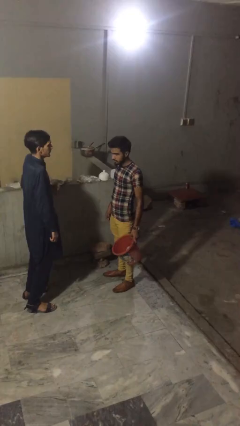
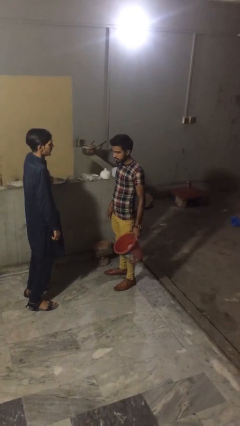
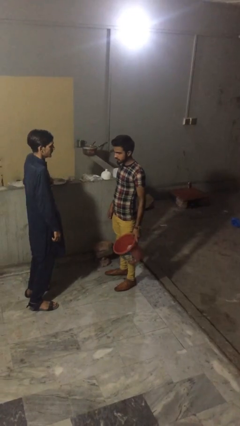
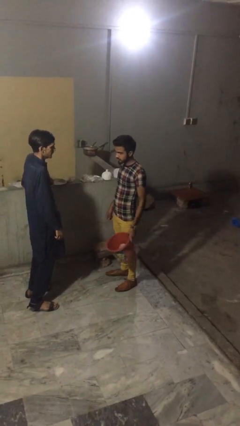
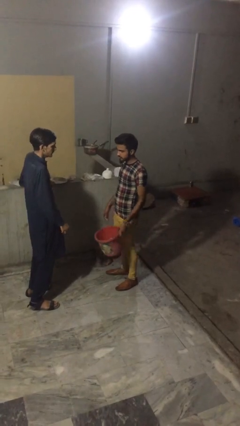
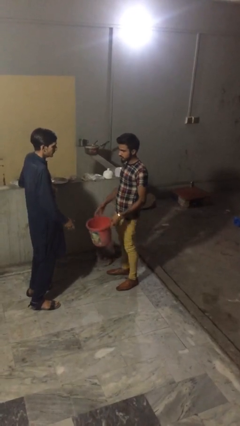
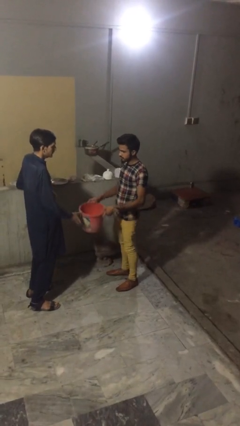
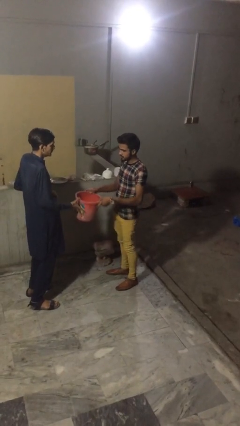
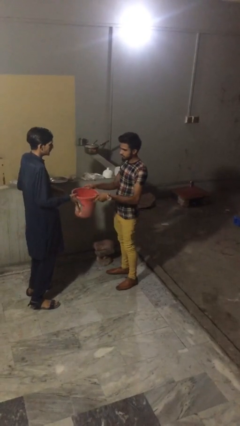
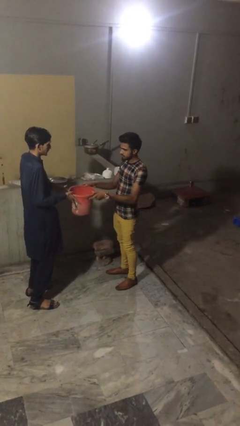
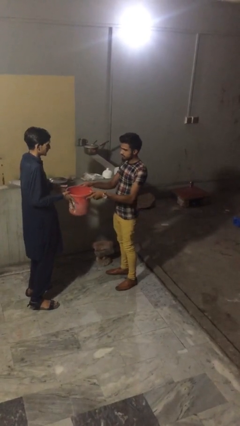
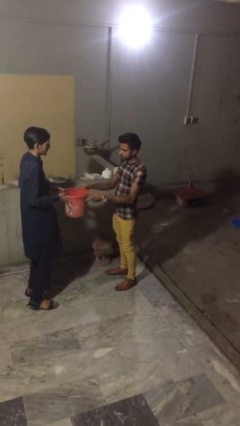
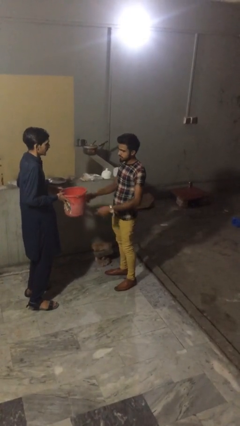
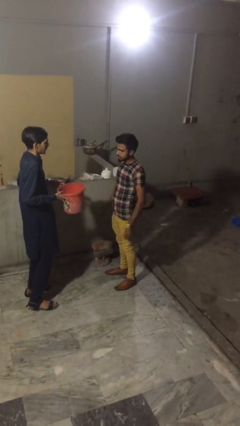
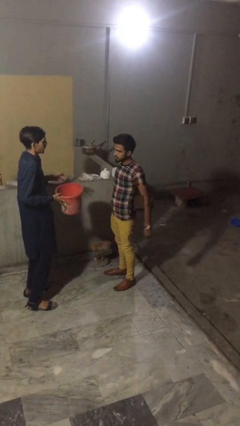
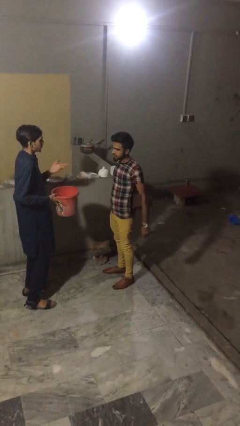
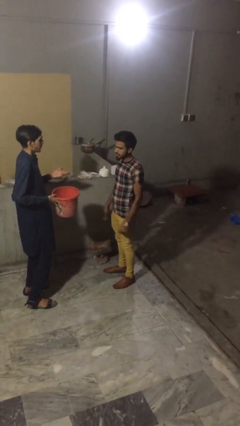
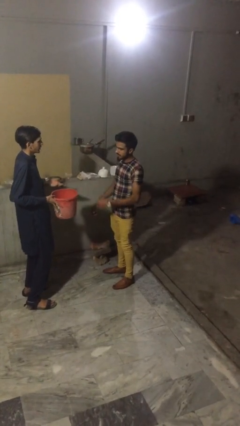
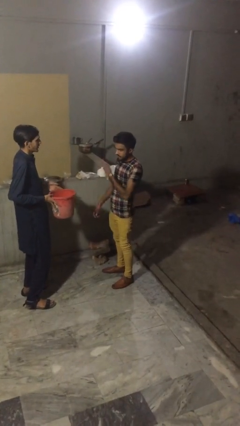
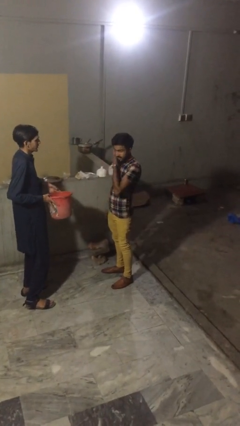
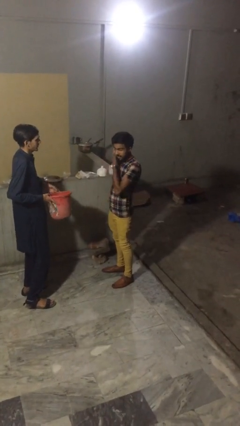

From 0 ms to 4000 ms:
person transfers object to person

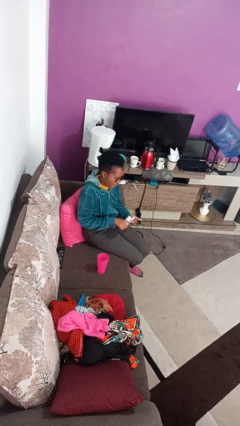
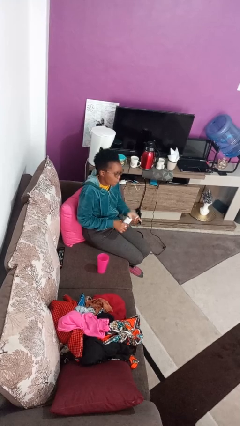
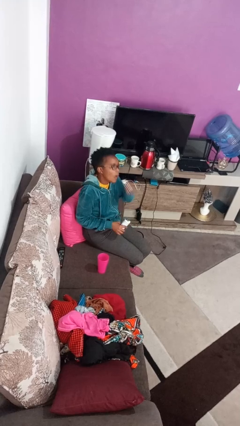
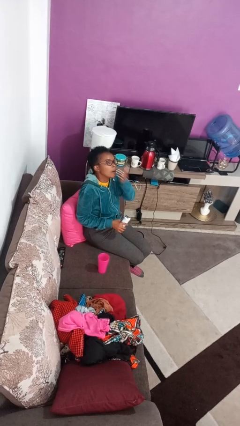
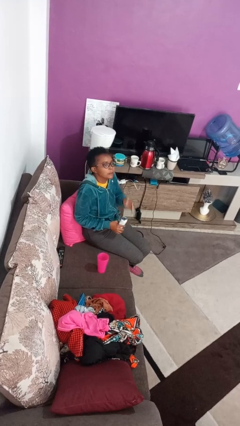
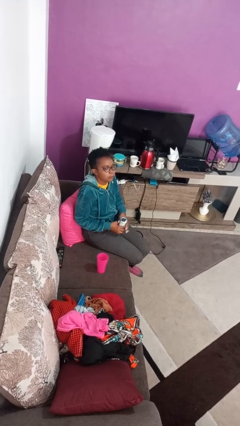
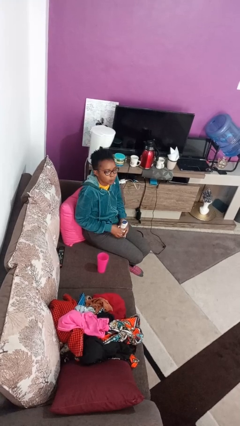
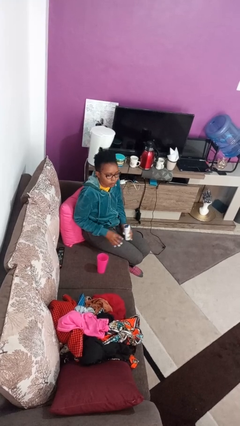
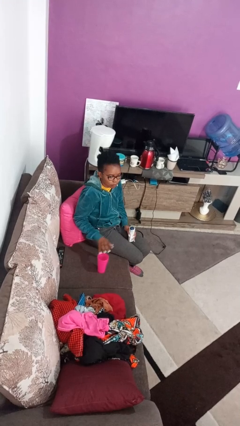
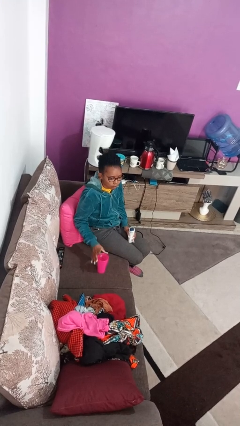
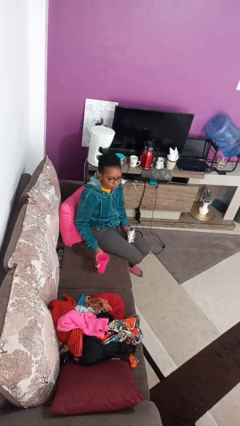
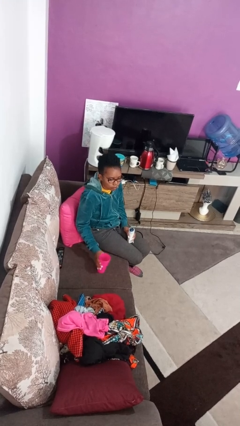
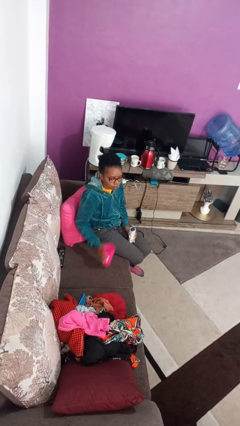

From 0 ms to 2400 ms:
person takes medicine pills

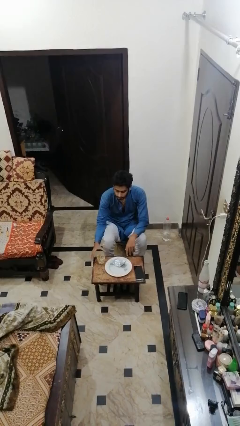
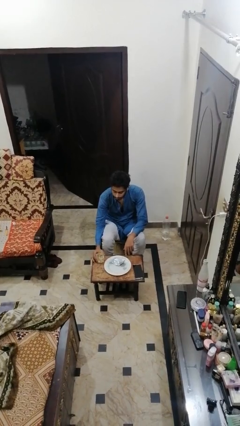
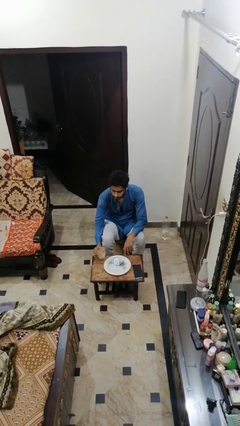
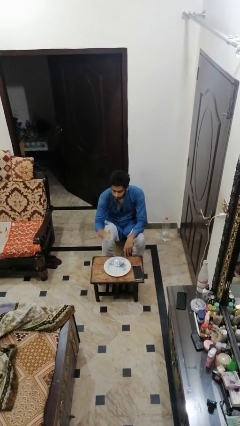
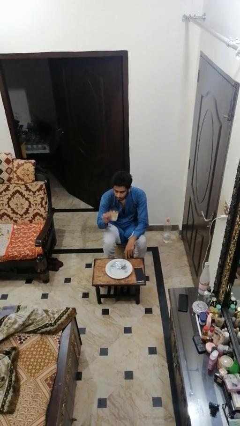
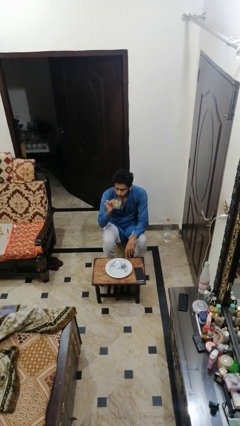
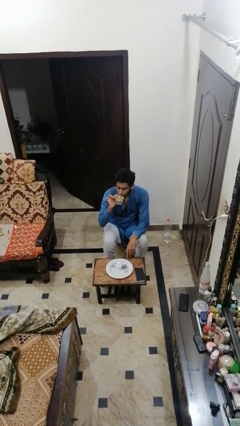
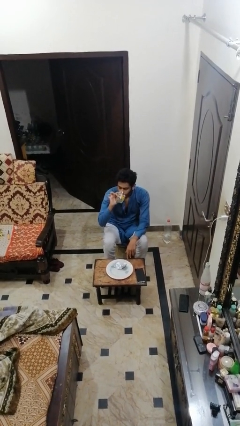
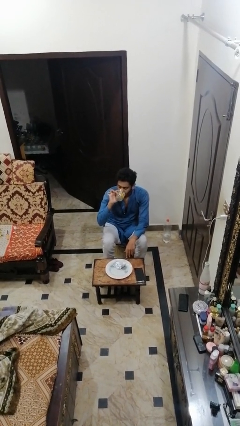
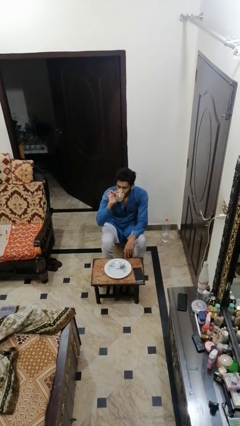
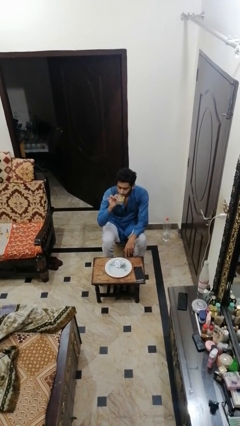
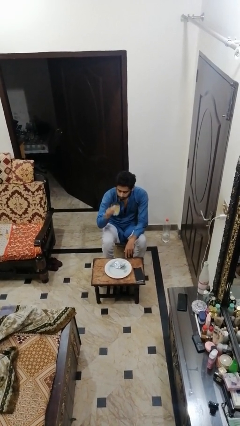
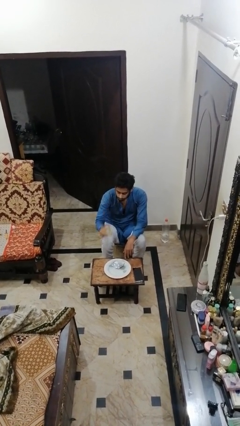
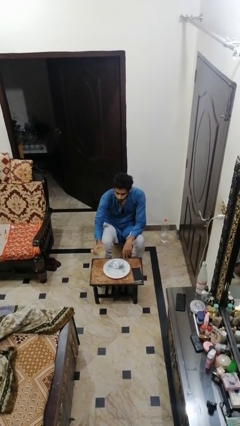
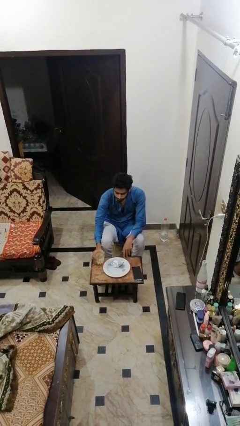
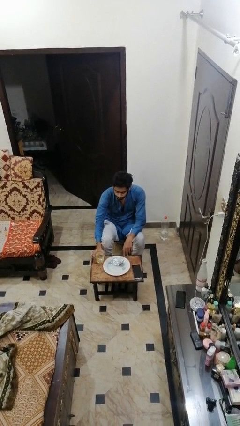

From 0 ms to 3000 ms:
person drinks from cup

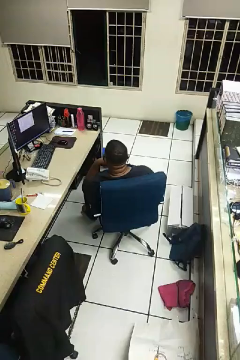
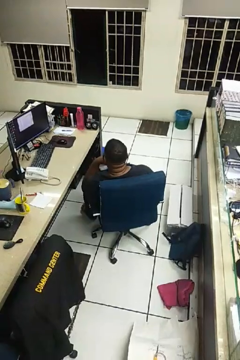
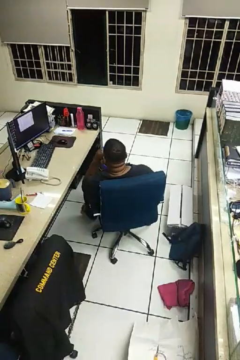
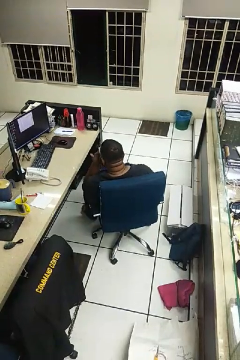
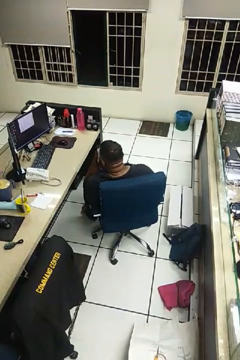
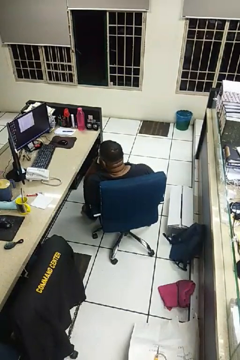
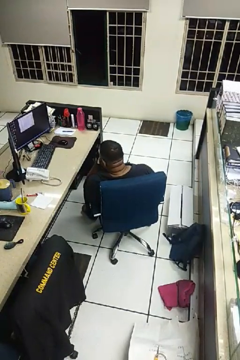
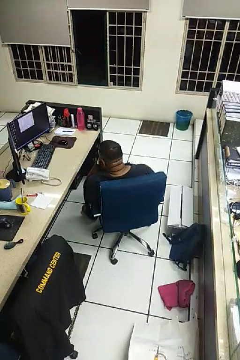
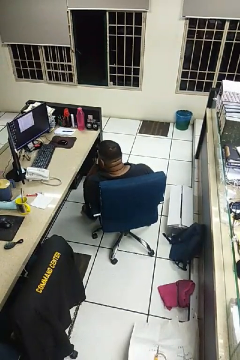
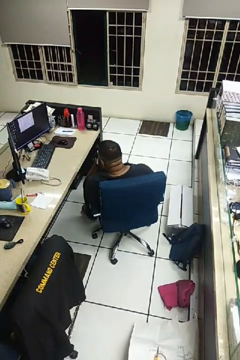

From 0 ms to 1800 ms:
person blows nose

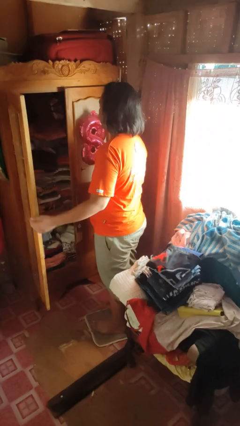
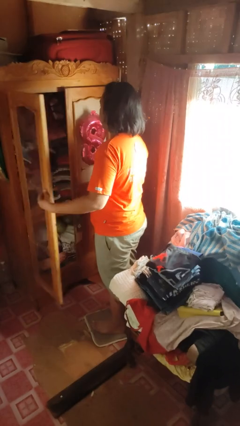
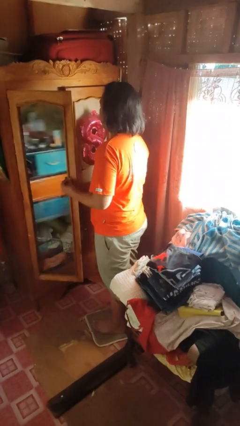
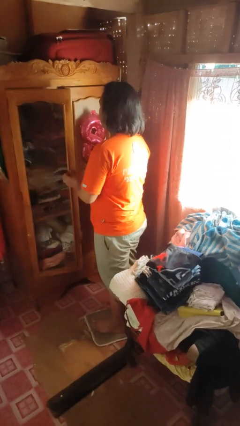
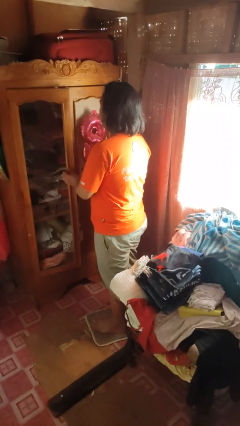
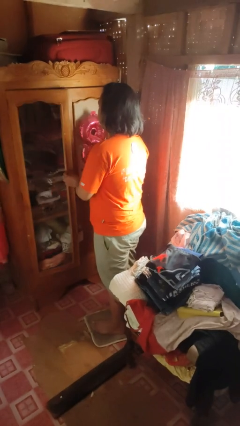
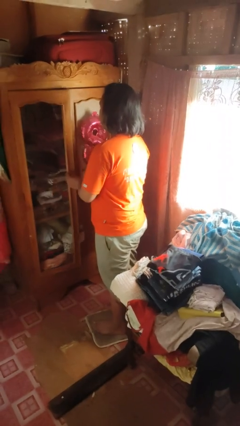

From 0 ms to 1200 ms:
person closes dresser drawer

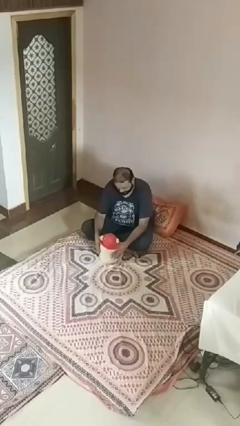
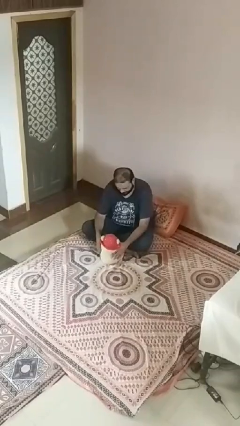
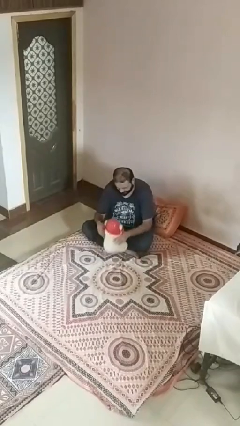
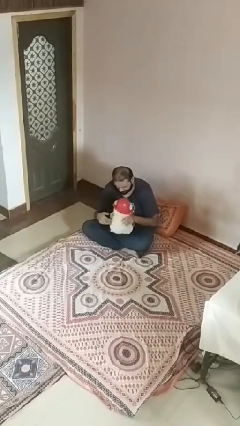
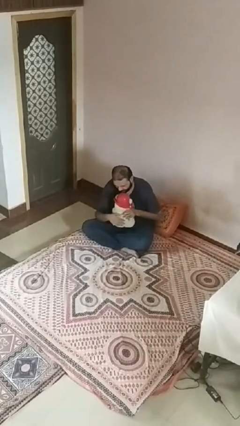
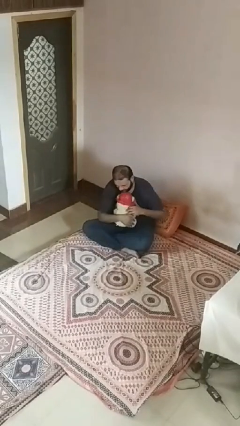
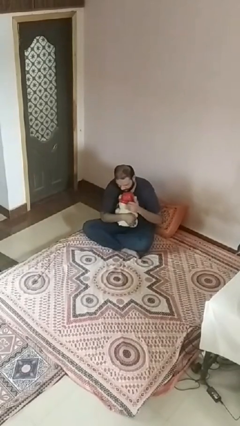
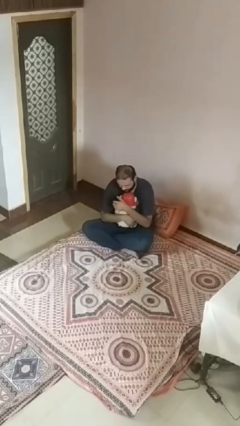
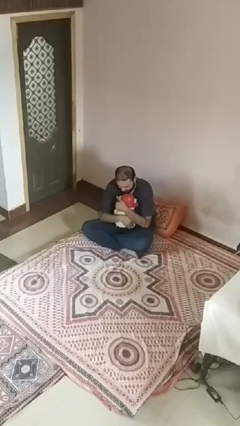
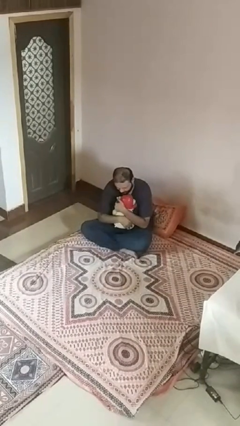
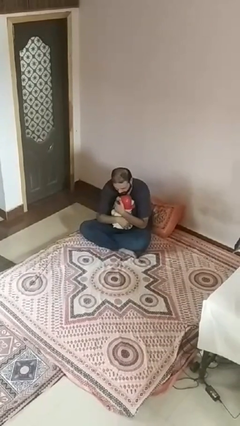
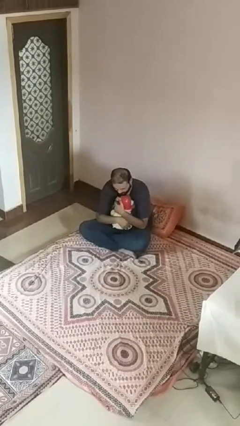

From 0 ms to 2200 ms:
person hugs stuffed animal

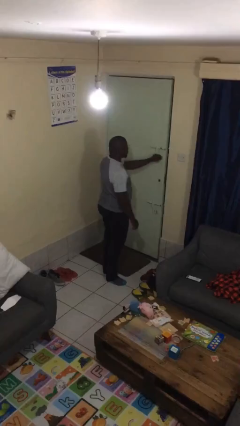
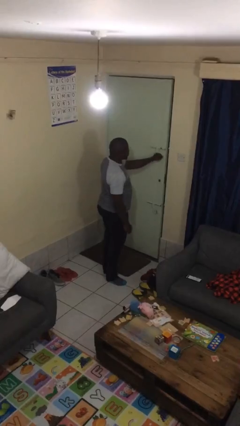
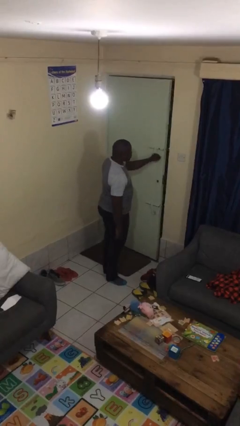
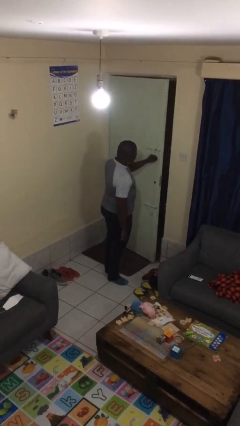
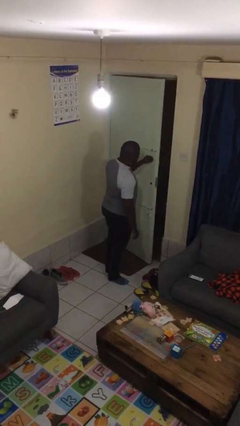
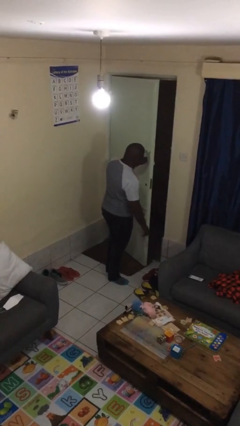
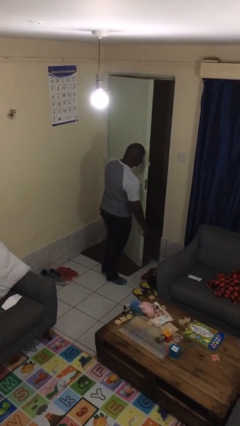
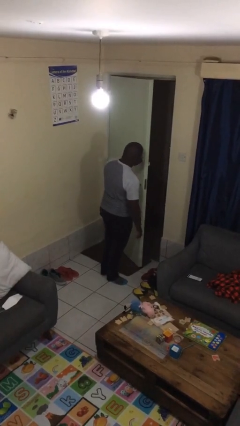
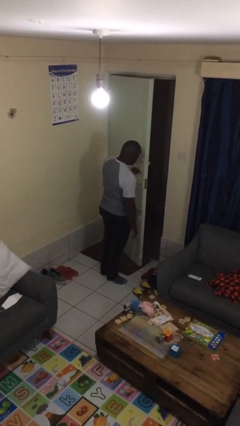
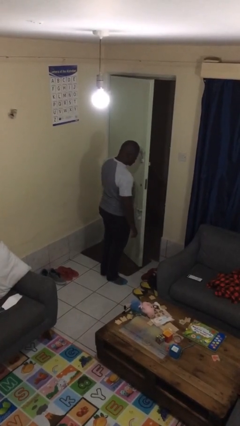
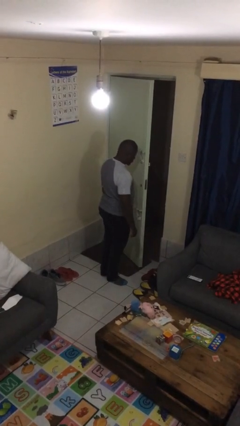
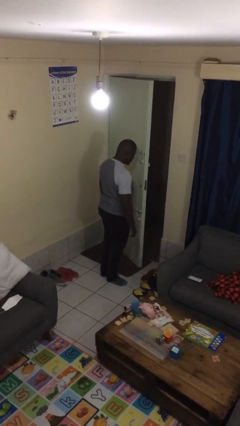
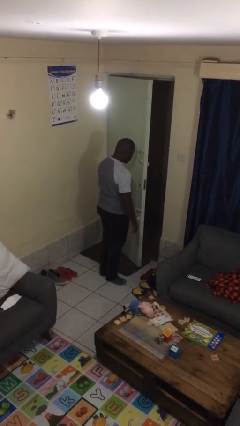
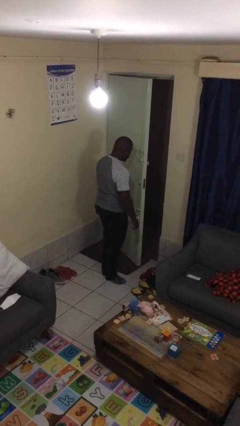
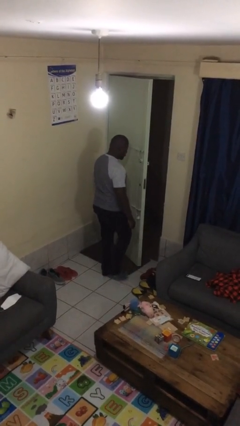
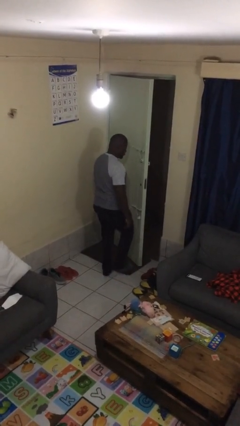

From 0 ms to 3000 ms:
person opens facility door
